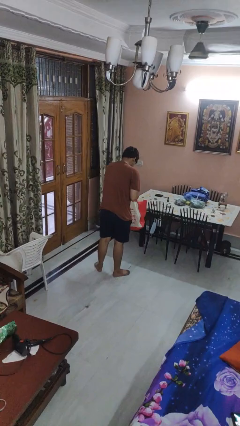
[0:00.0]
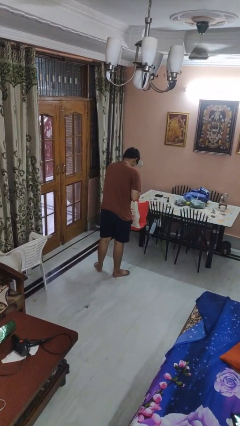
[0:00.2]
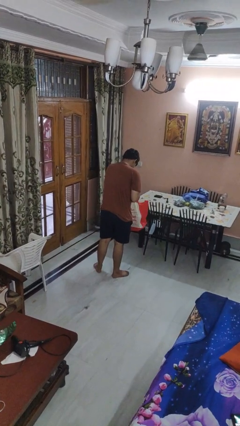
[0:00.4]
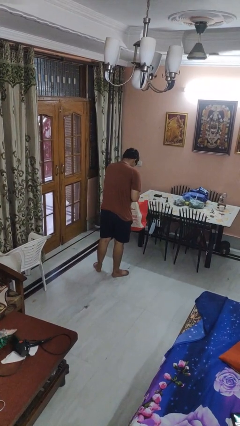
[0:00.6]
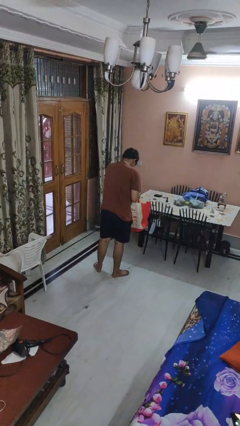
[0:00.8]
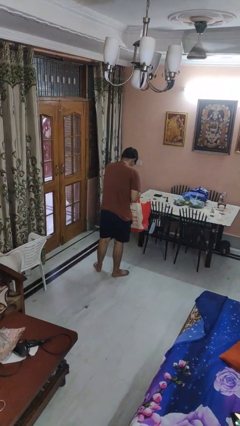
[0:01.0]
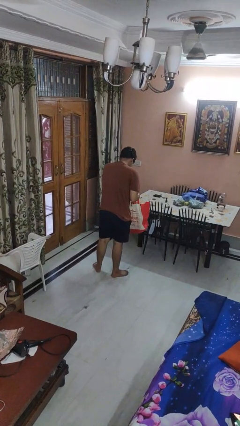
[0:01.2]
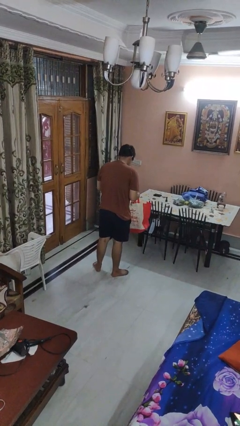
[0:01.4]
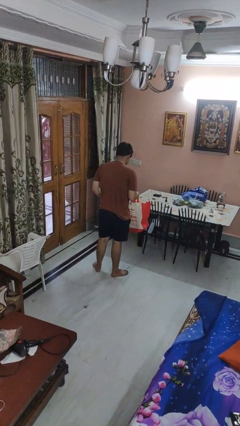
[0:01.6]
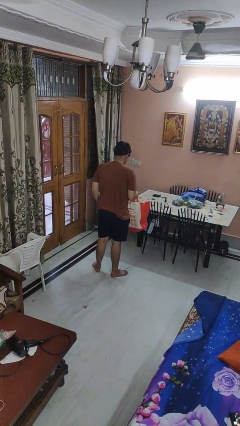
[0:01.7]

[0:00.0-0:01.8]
person searches in bag

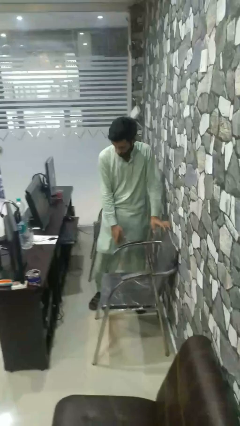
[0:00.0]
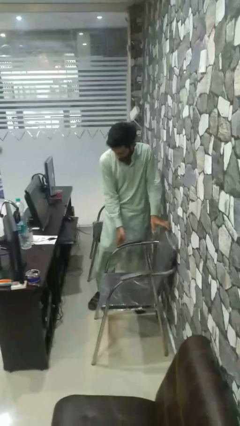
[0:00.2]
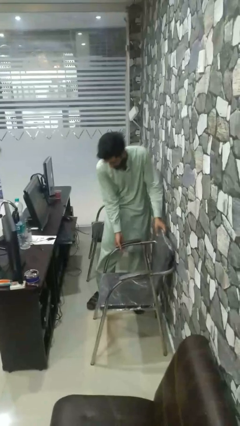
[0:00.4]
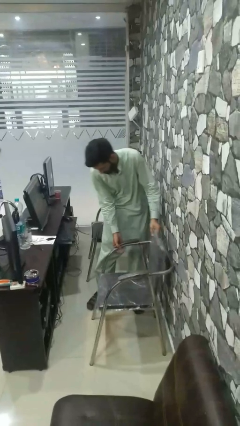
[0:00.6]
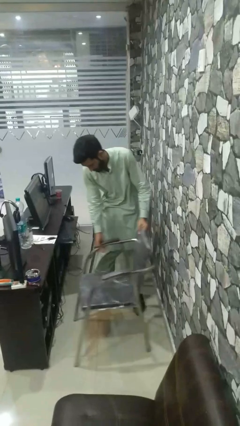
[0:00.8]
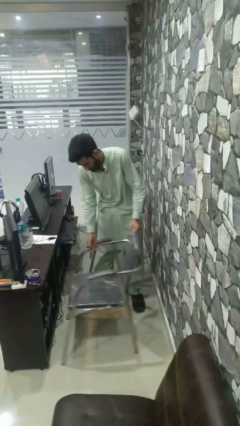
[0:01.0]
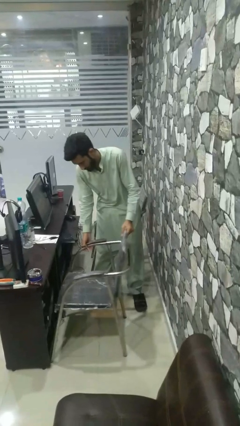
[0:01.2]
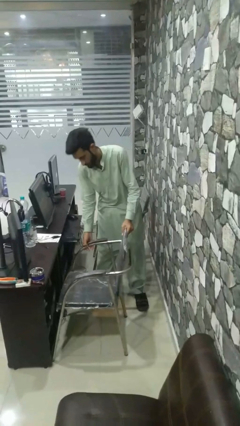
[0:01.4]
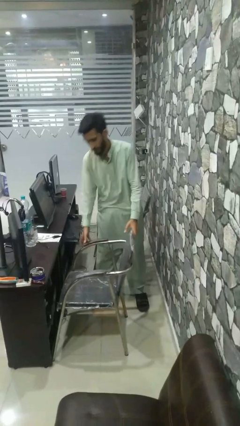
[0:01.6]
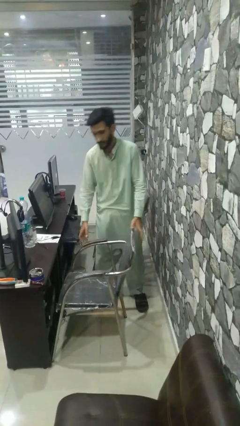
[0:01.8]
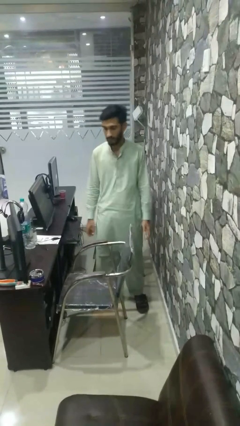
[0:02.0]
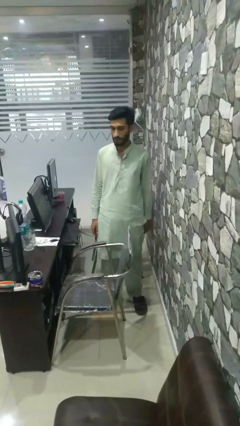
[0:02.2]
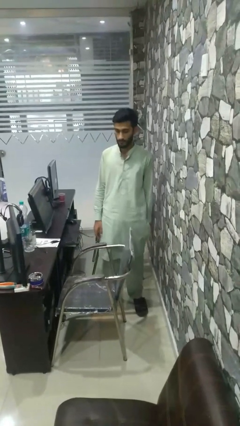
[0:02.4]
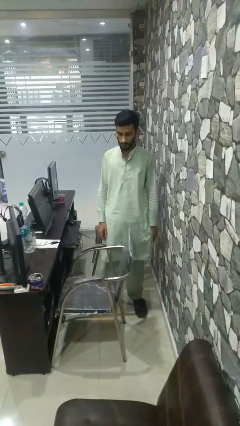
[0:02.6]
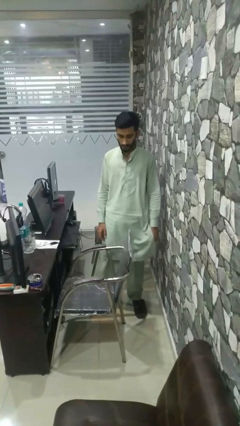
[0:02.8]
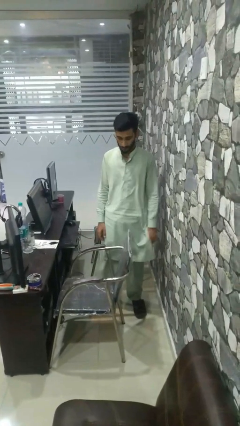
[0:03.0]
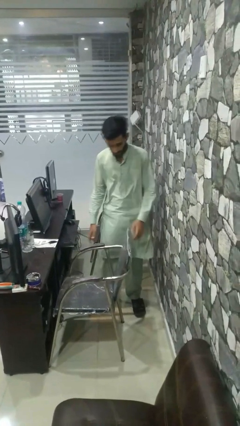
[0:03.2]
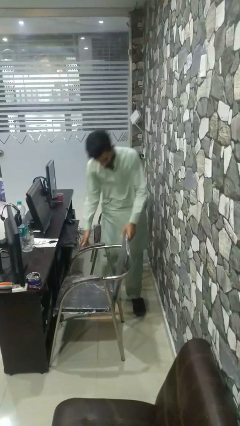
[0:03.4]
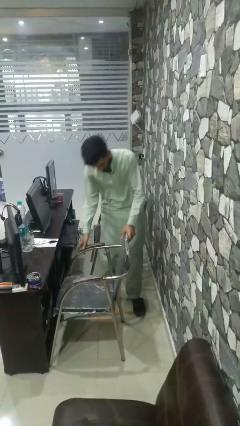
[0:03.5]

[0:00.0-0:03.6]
person pushes in chair

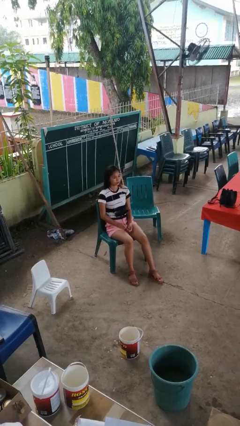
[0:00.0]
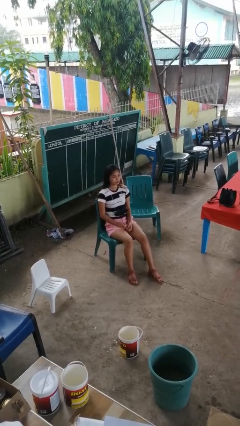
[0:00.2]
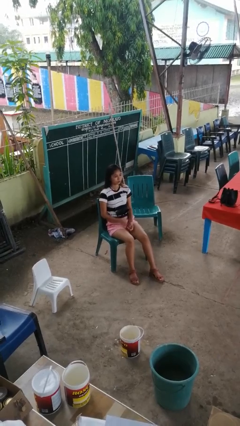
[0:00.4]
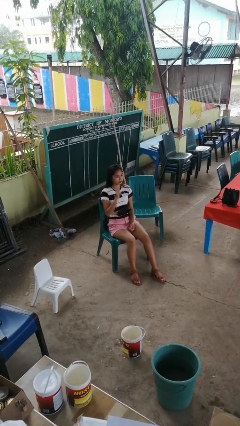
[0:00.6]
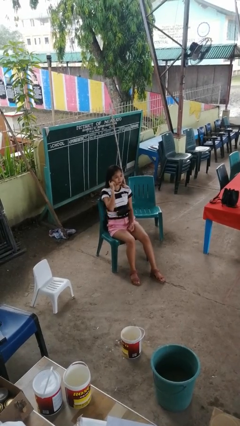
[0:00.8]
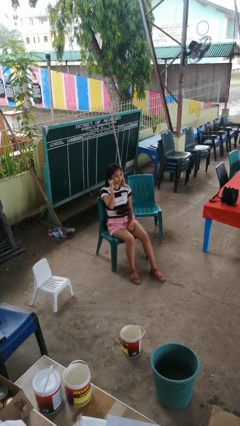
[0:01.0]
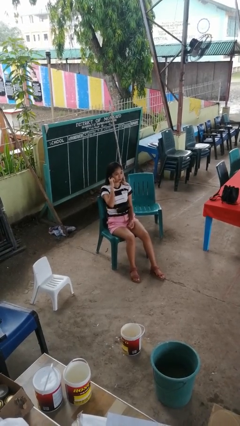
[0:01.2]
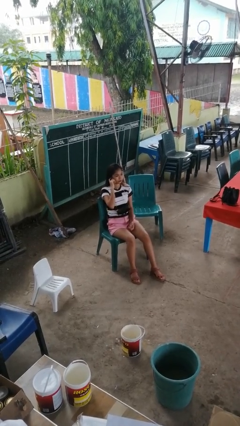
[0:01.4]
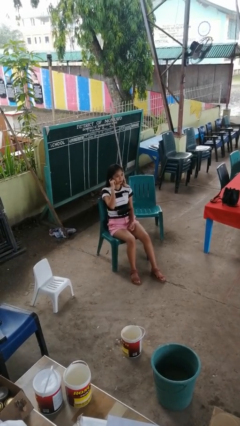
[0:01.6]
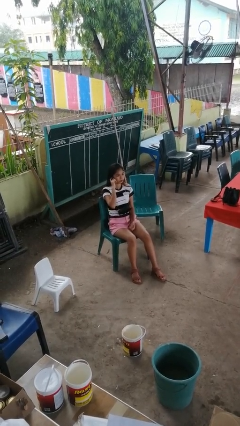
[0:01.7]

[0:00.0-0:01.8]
person gestures listen closely

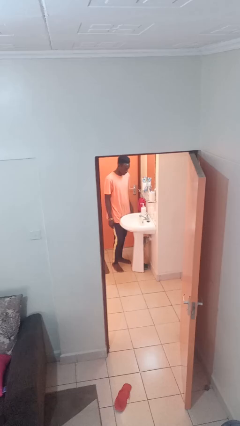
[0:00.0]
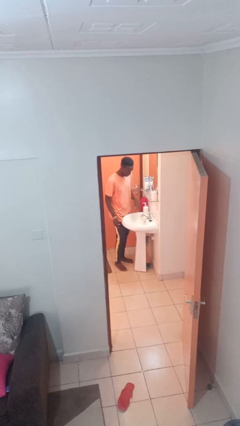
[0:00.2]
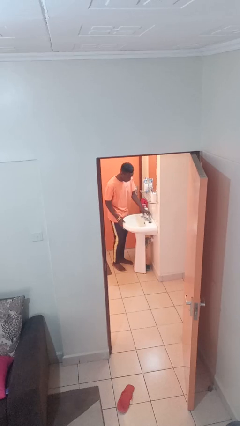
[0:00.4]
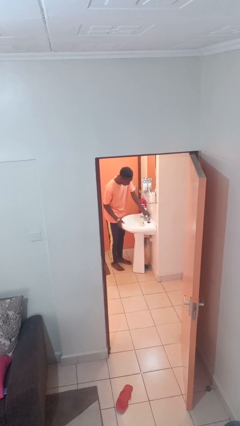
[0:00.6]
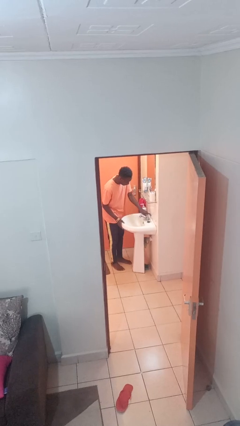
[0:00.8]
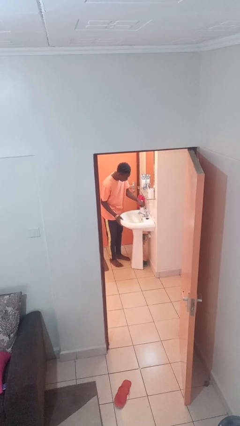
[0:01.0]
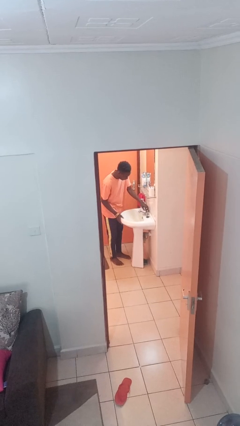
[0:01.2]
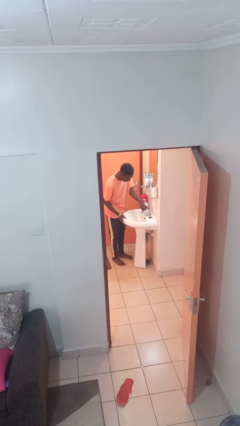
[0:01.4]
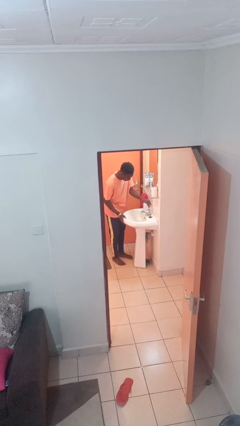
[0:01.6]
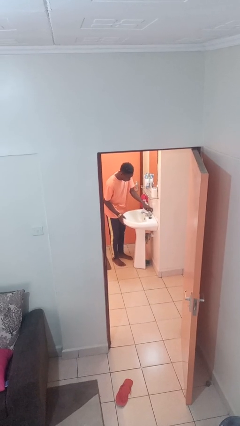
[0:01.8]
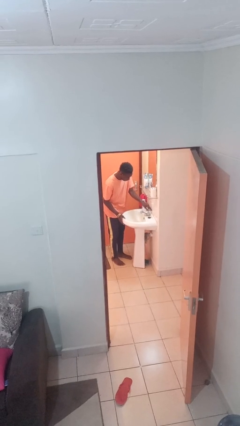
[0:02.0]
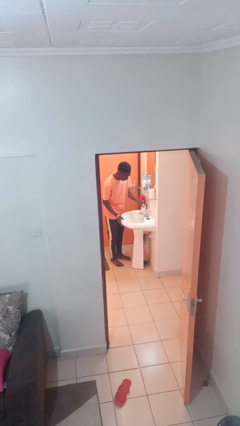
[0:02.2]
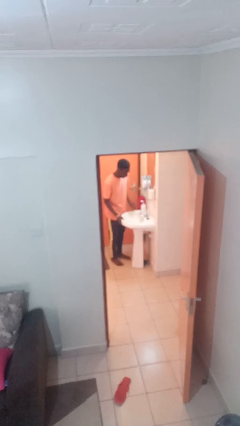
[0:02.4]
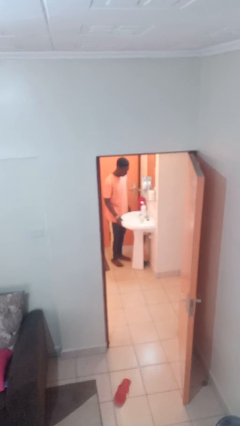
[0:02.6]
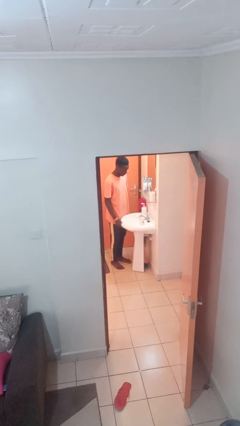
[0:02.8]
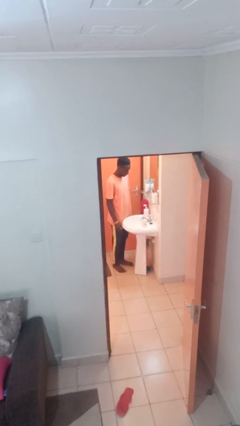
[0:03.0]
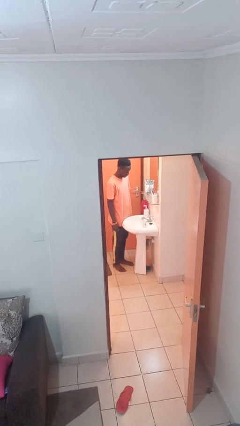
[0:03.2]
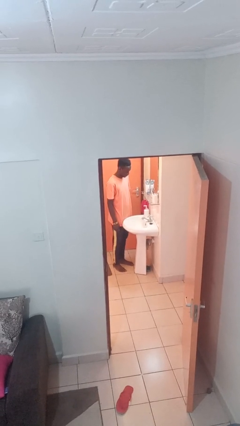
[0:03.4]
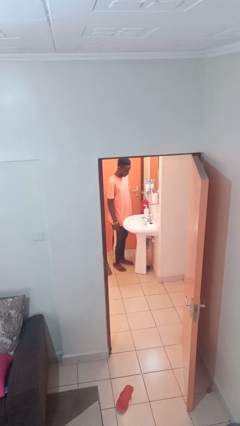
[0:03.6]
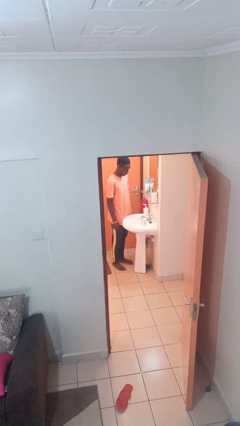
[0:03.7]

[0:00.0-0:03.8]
person turns on faucet

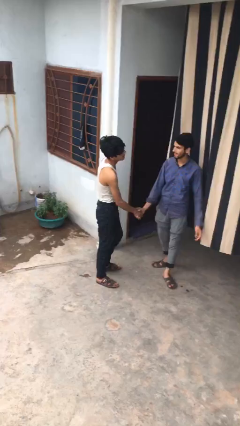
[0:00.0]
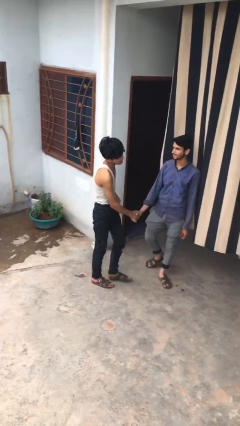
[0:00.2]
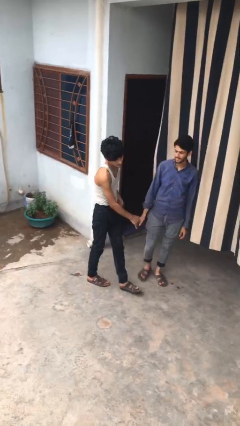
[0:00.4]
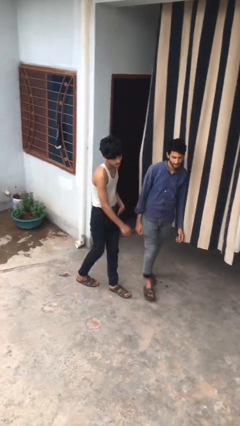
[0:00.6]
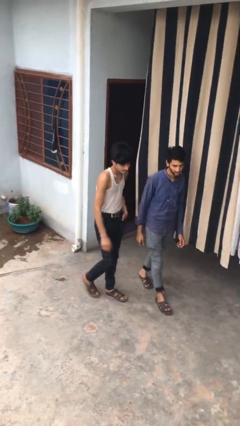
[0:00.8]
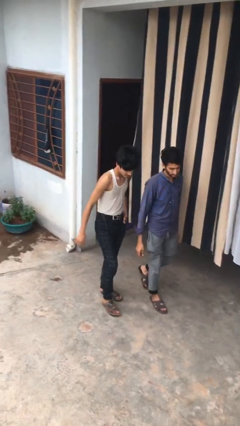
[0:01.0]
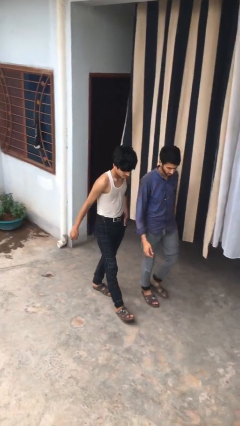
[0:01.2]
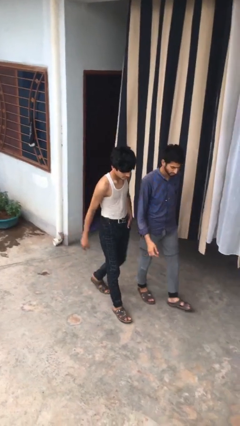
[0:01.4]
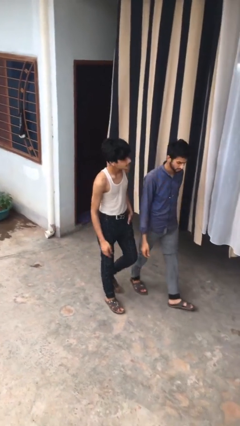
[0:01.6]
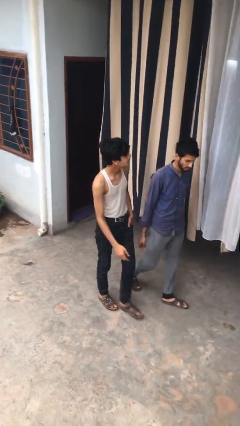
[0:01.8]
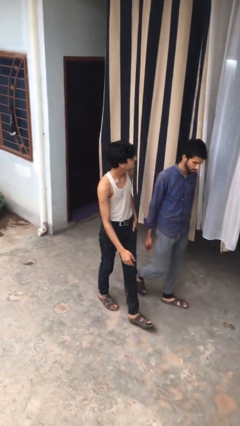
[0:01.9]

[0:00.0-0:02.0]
person talks to person

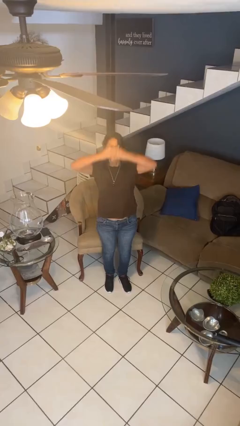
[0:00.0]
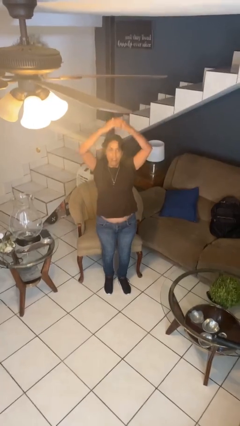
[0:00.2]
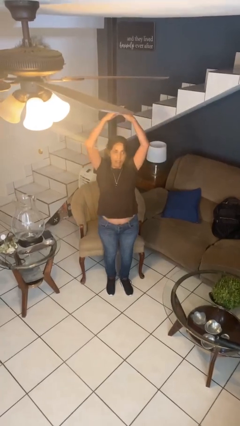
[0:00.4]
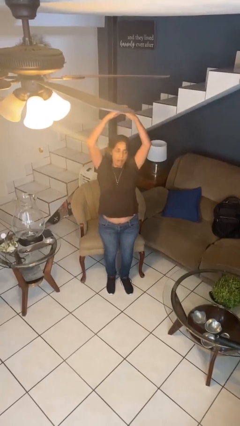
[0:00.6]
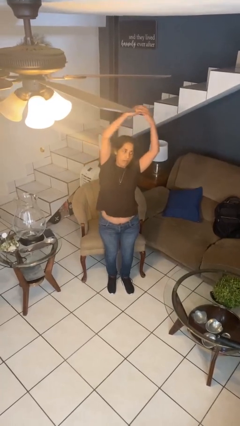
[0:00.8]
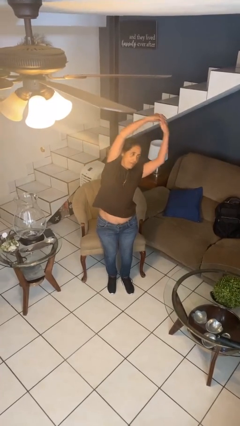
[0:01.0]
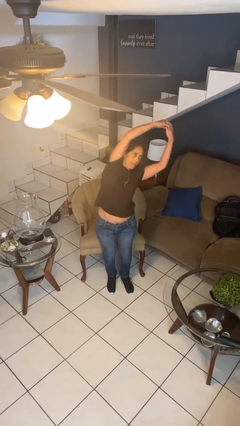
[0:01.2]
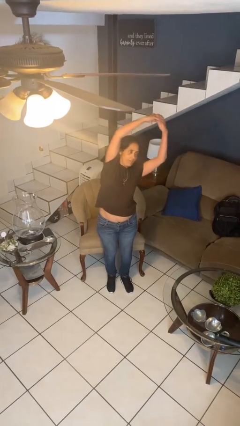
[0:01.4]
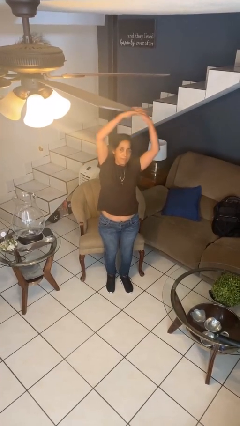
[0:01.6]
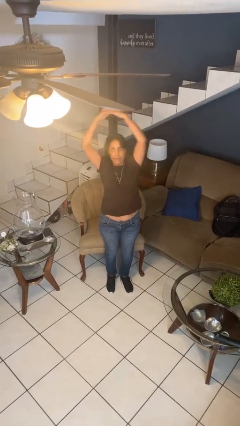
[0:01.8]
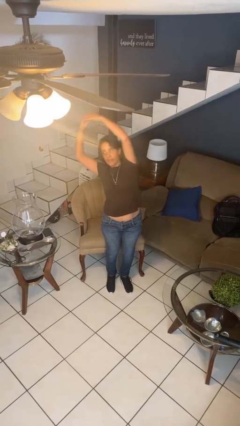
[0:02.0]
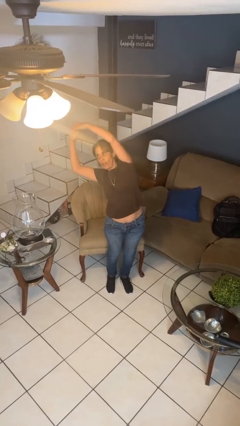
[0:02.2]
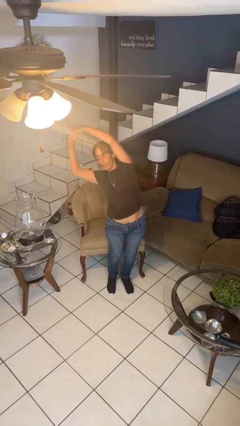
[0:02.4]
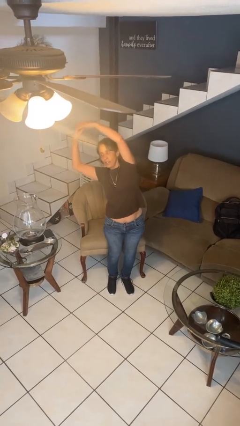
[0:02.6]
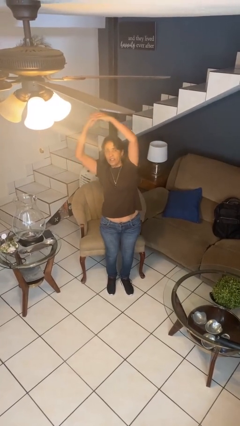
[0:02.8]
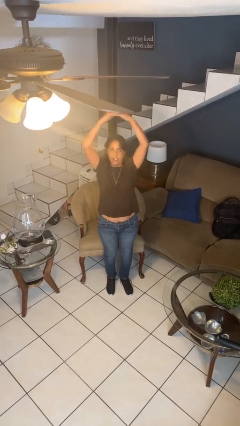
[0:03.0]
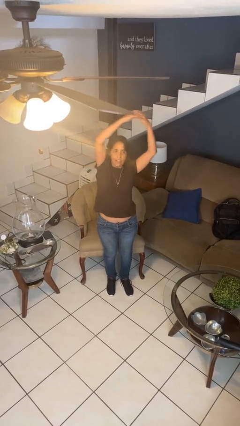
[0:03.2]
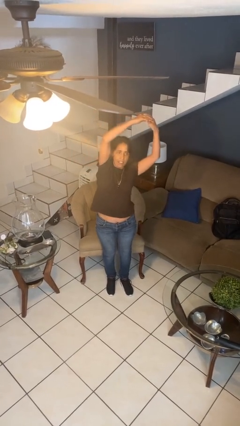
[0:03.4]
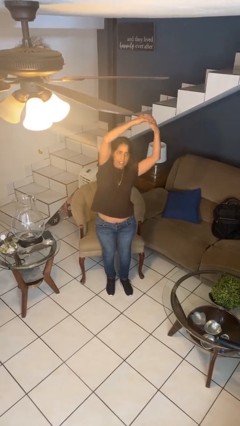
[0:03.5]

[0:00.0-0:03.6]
person stretches arms over head

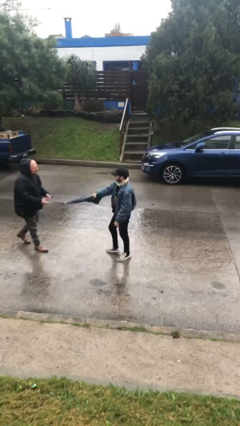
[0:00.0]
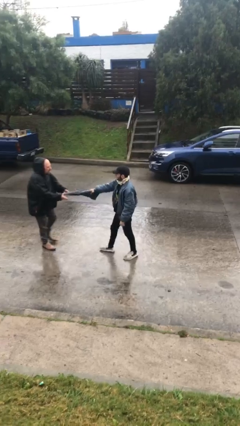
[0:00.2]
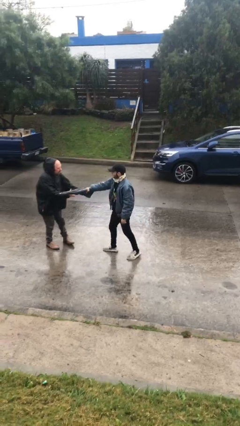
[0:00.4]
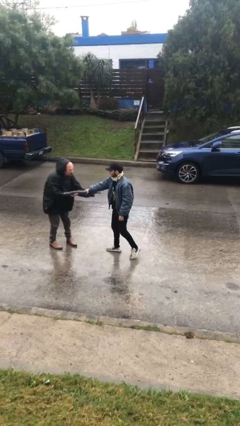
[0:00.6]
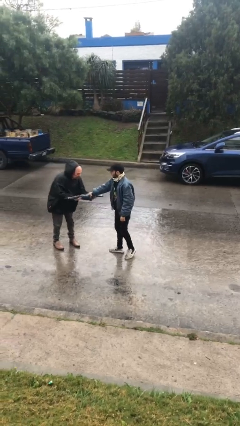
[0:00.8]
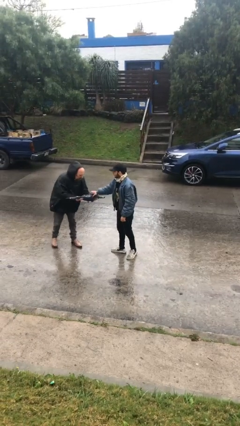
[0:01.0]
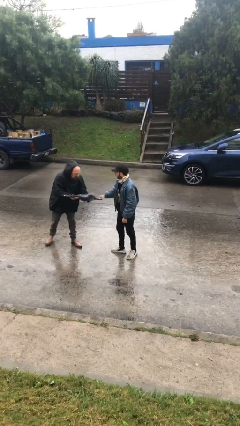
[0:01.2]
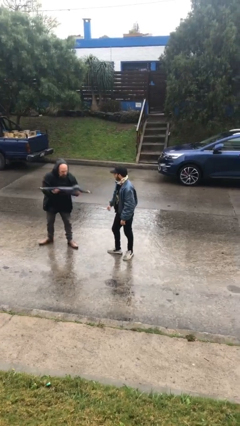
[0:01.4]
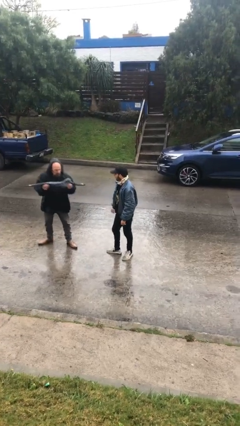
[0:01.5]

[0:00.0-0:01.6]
person transfers object to person
